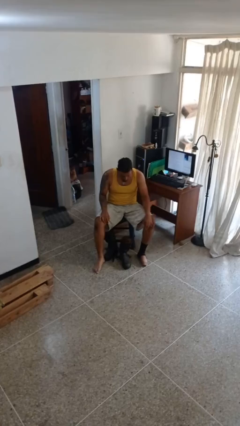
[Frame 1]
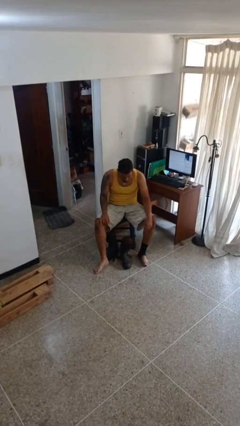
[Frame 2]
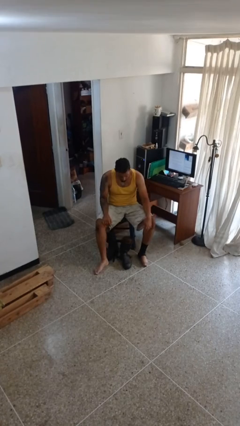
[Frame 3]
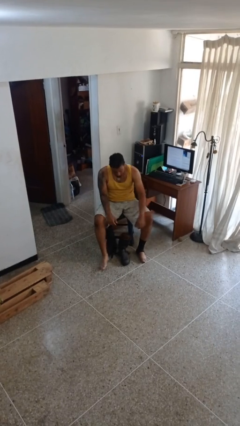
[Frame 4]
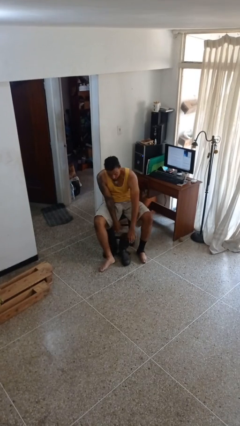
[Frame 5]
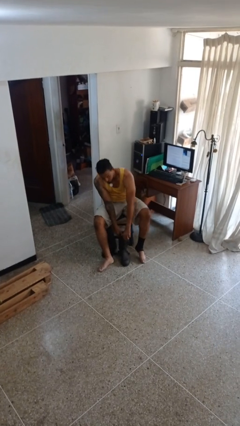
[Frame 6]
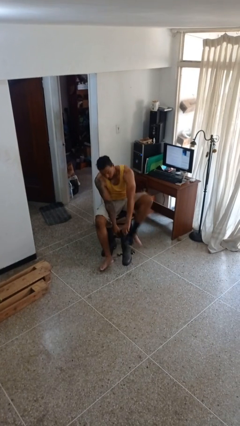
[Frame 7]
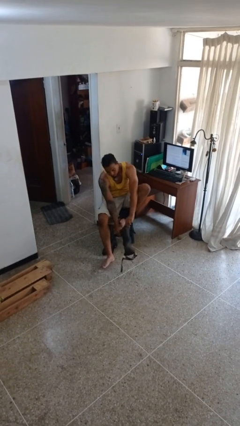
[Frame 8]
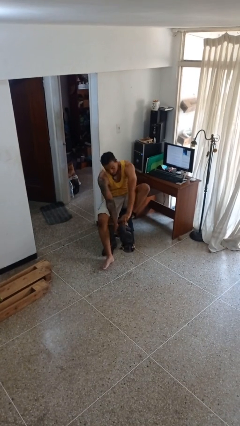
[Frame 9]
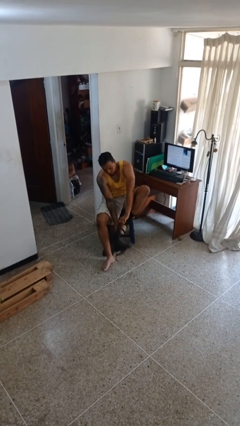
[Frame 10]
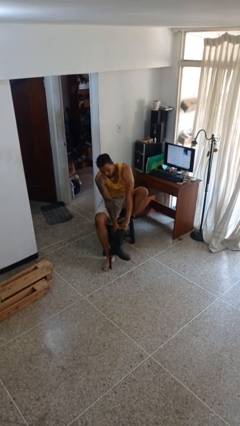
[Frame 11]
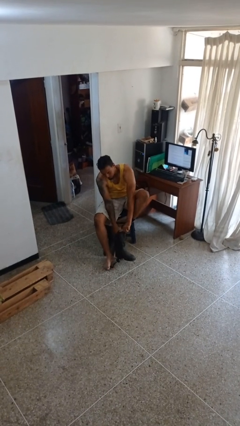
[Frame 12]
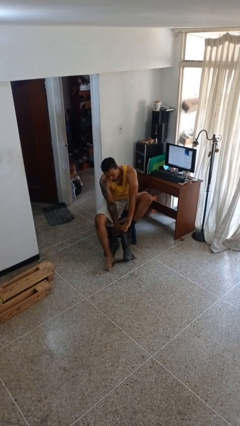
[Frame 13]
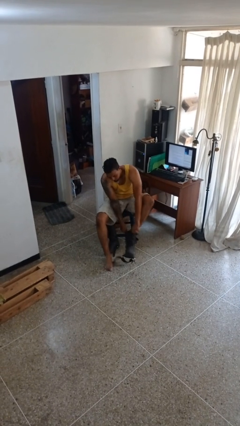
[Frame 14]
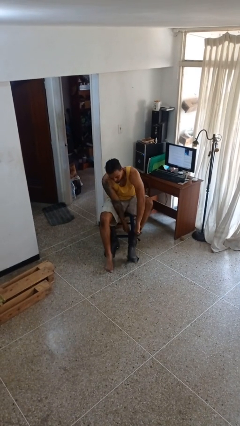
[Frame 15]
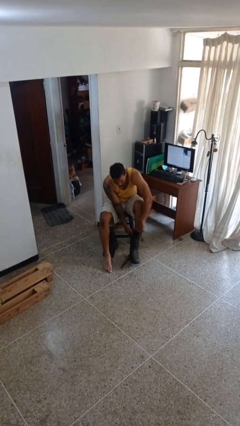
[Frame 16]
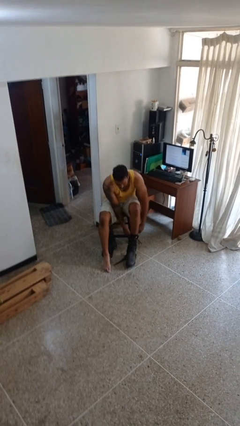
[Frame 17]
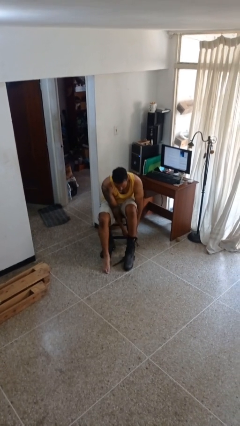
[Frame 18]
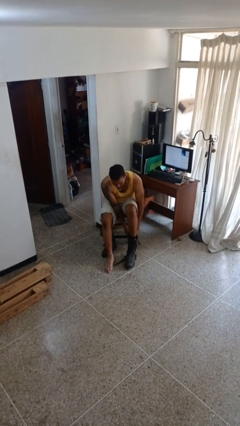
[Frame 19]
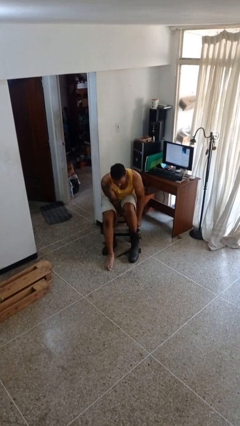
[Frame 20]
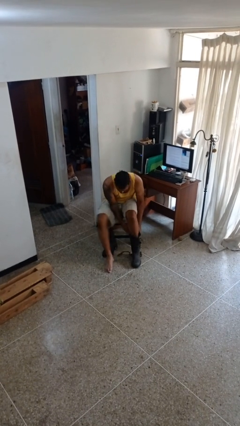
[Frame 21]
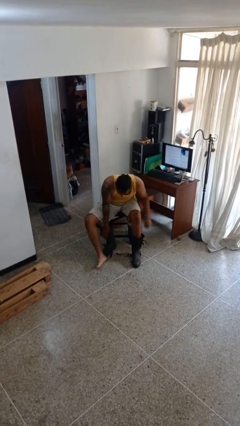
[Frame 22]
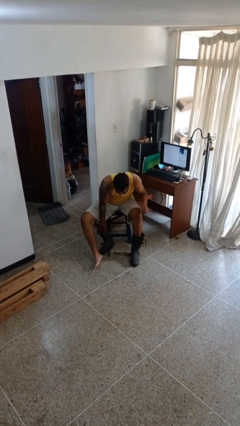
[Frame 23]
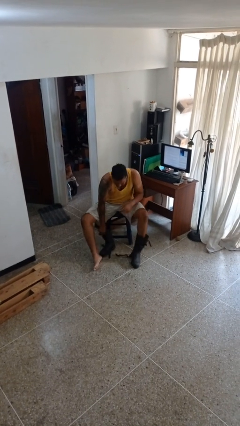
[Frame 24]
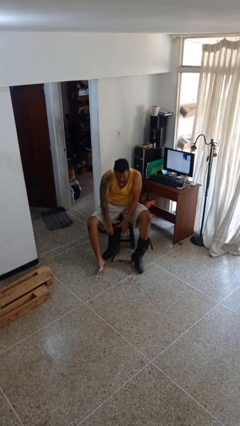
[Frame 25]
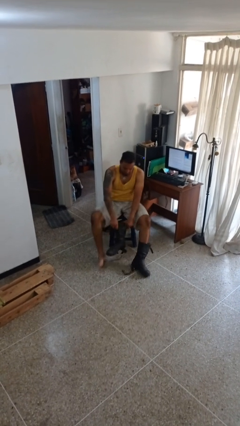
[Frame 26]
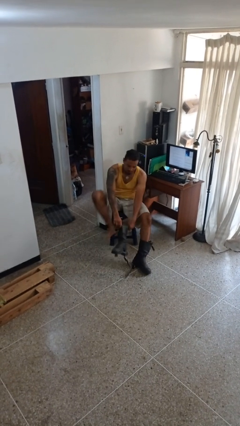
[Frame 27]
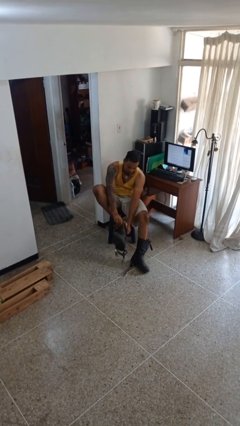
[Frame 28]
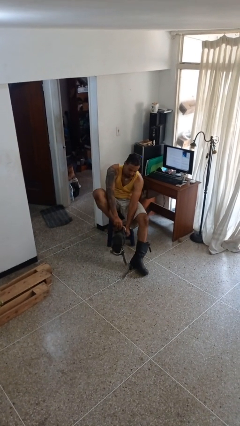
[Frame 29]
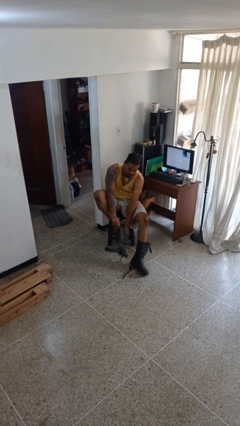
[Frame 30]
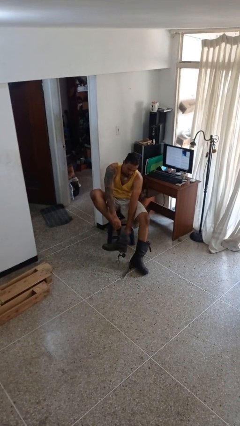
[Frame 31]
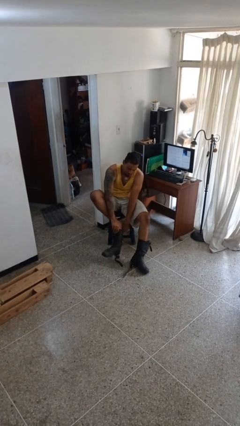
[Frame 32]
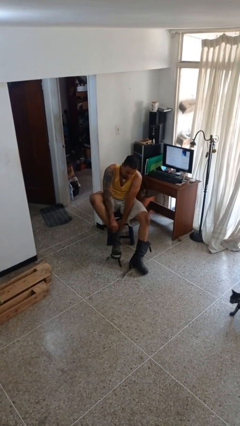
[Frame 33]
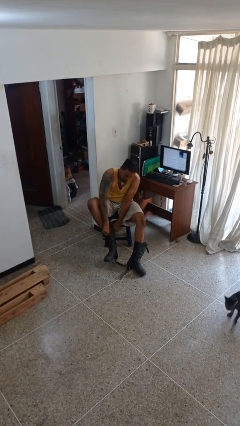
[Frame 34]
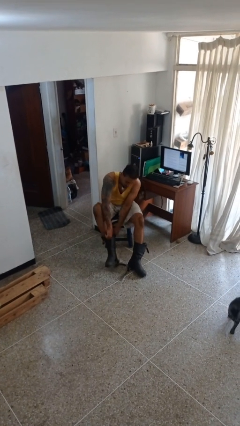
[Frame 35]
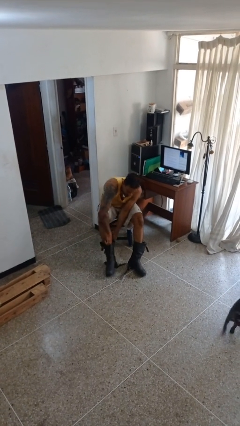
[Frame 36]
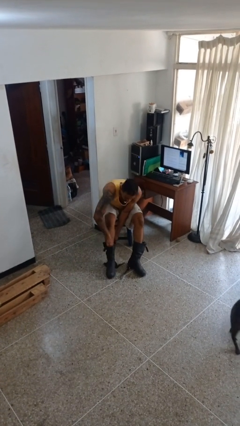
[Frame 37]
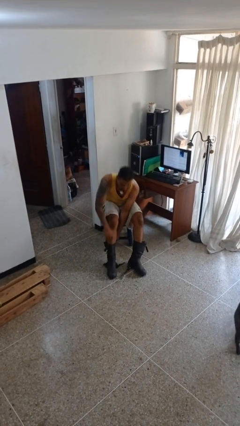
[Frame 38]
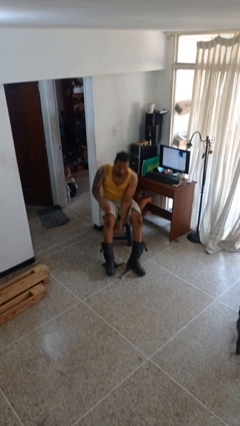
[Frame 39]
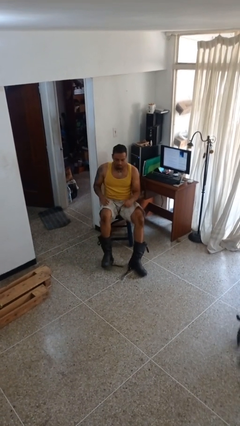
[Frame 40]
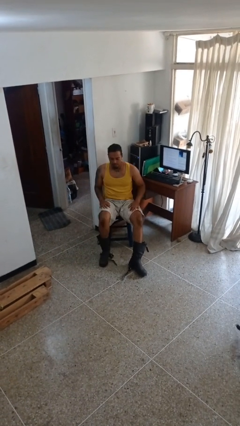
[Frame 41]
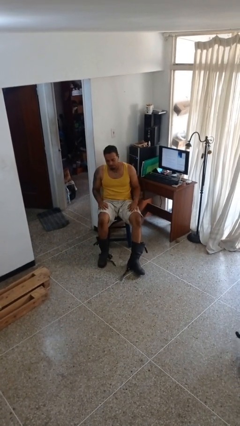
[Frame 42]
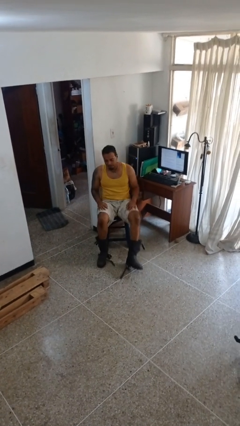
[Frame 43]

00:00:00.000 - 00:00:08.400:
person puts on boots

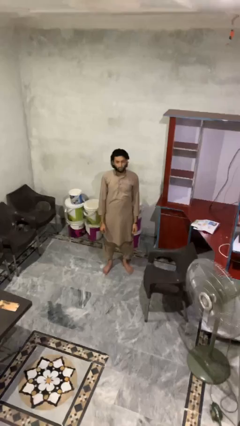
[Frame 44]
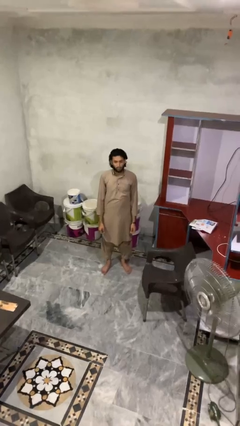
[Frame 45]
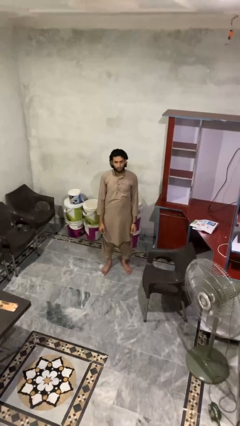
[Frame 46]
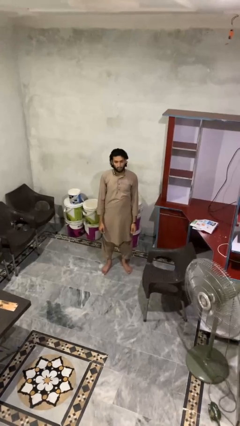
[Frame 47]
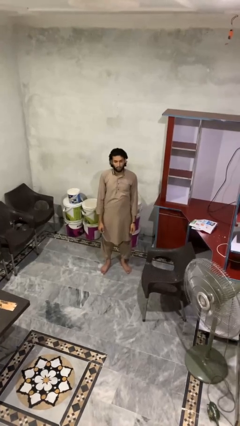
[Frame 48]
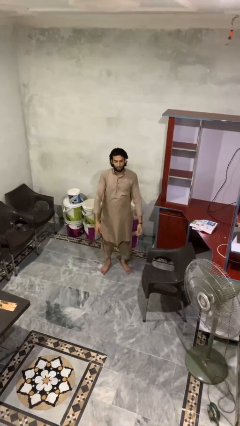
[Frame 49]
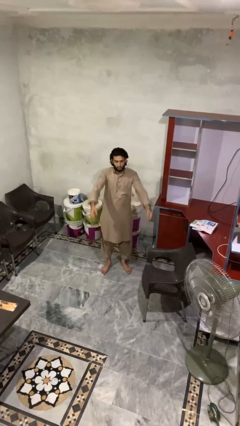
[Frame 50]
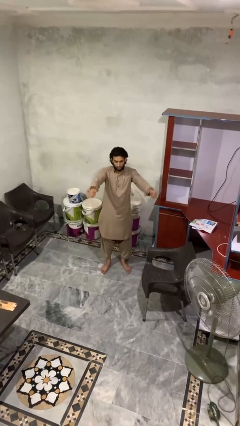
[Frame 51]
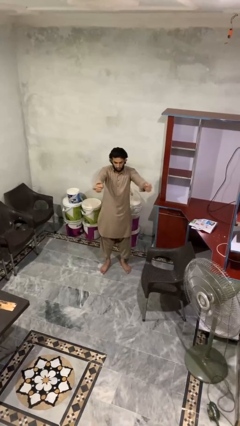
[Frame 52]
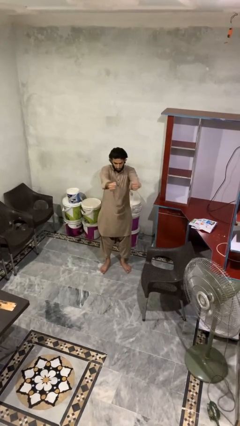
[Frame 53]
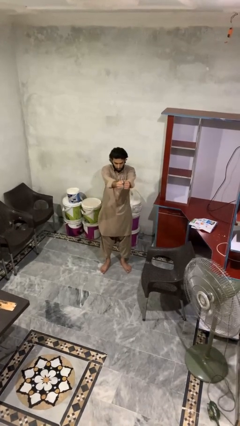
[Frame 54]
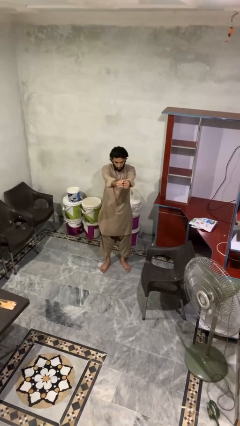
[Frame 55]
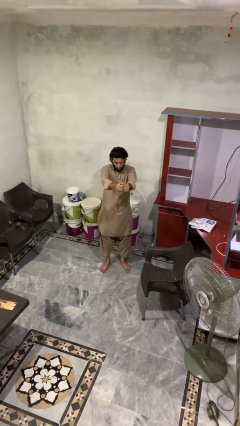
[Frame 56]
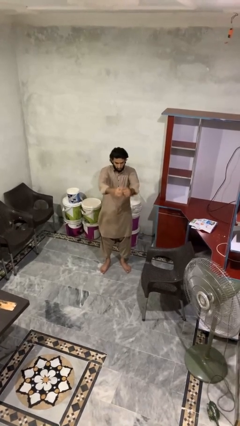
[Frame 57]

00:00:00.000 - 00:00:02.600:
person gestures zoom out

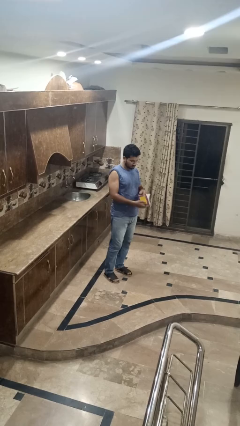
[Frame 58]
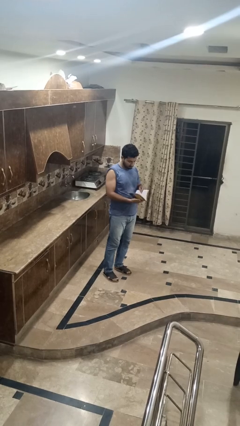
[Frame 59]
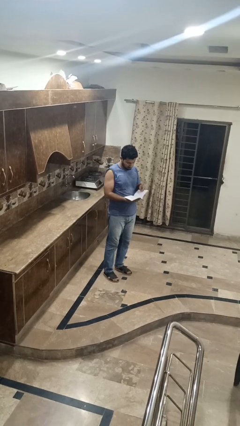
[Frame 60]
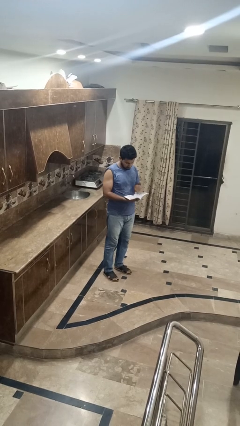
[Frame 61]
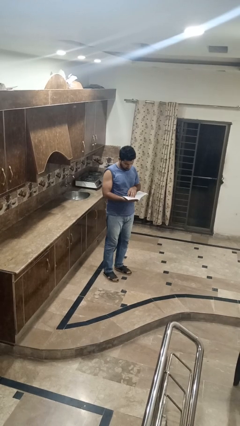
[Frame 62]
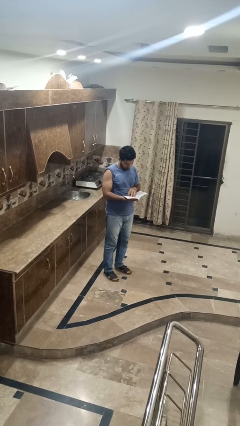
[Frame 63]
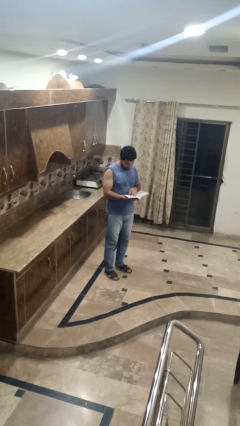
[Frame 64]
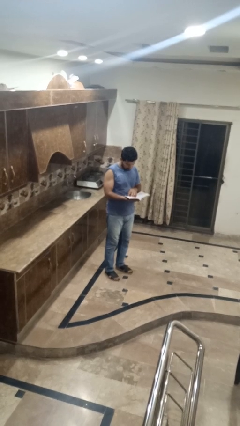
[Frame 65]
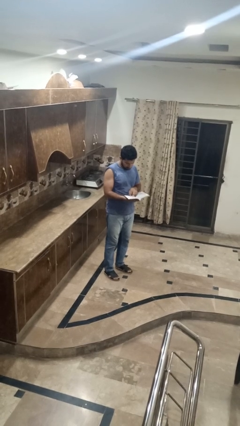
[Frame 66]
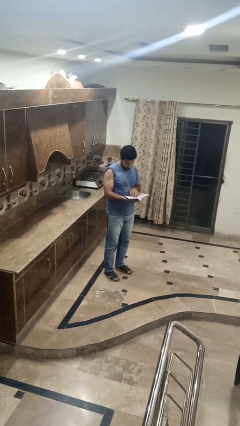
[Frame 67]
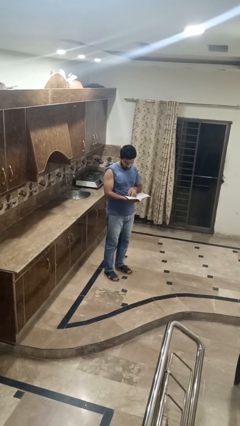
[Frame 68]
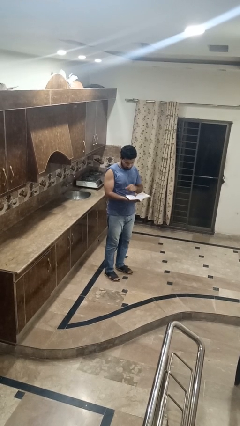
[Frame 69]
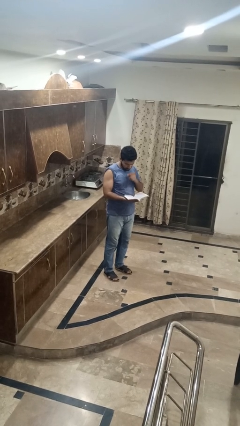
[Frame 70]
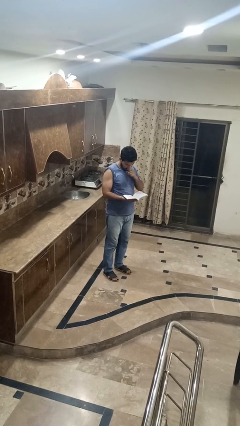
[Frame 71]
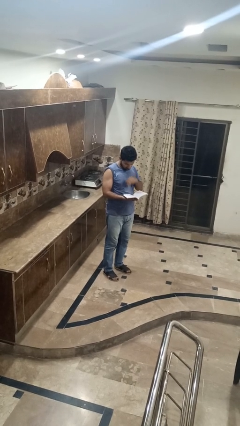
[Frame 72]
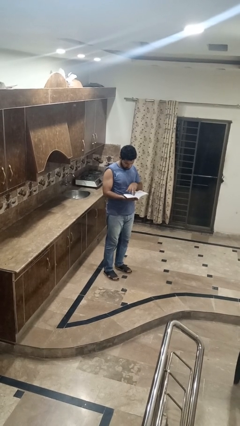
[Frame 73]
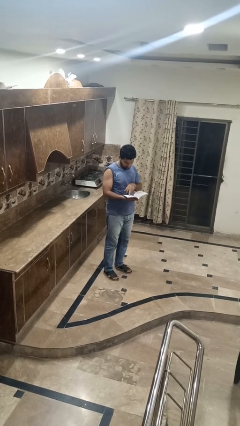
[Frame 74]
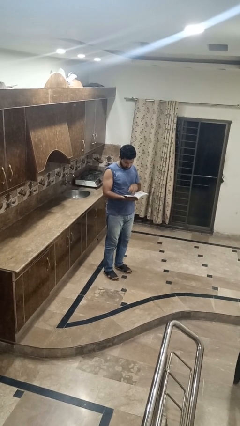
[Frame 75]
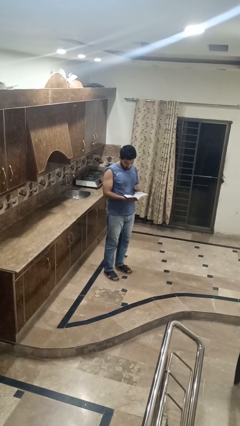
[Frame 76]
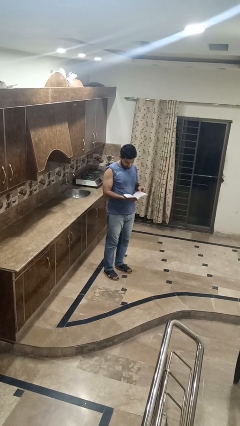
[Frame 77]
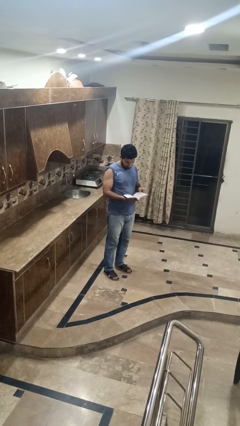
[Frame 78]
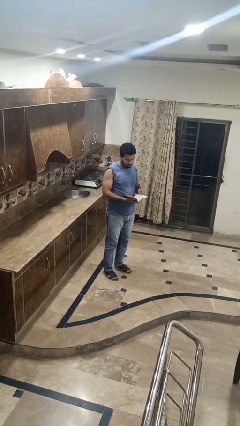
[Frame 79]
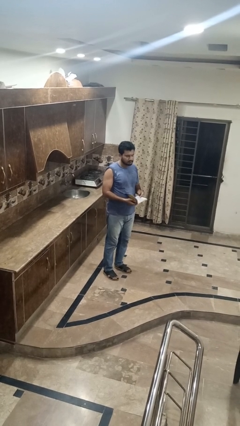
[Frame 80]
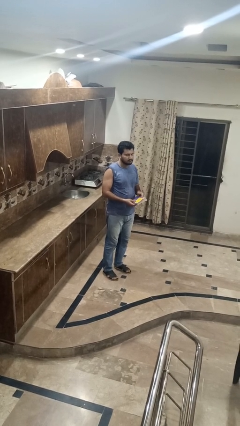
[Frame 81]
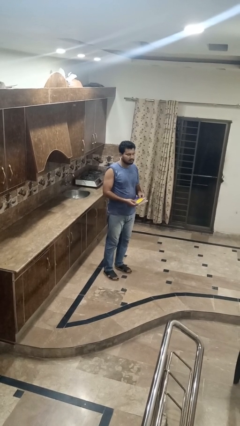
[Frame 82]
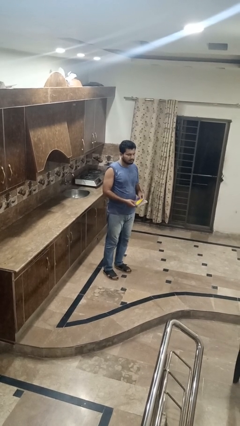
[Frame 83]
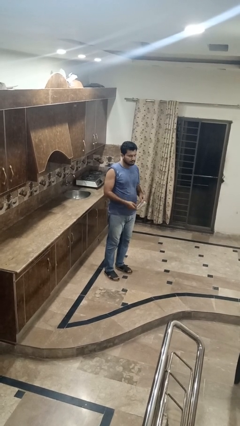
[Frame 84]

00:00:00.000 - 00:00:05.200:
person reads book

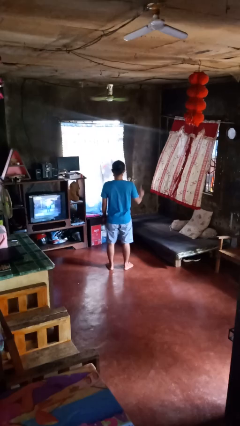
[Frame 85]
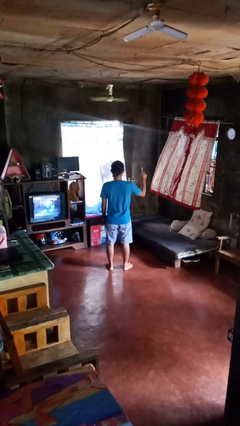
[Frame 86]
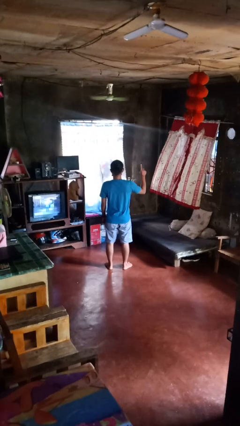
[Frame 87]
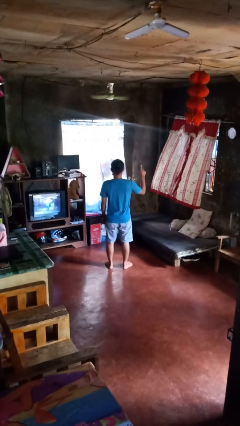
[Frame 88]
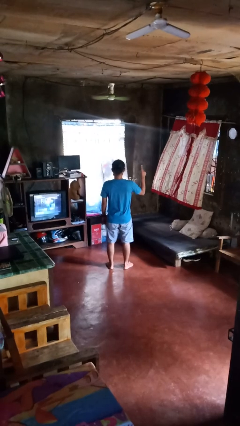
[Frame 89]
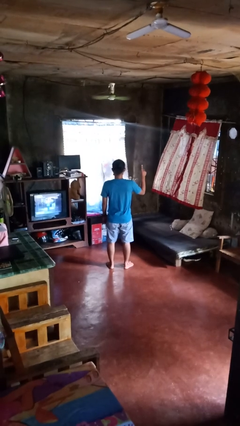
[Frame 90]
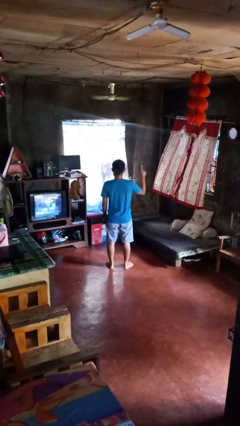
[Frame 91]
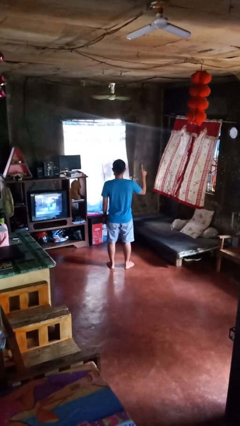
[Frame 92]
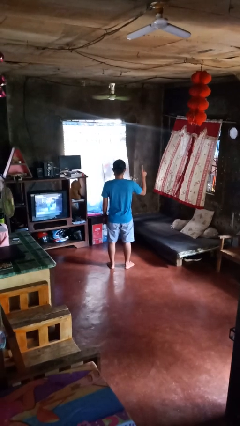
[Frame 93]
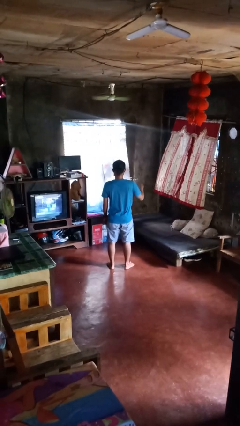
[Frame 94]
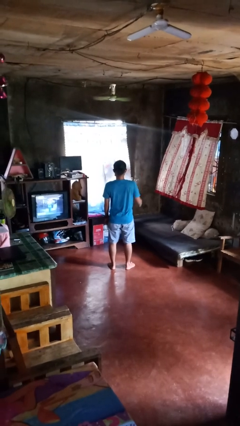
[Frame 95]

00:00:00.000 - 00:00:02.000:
person gestures number one

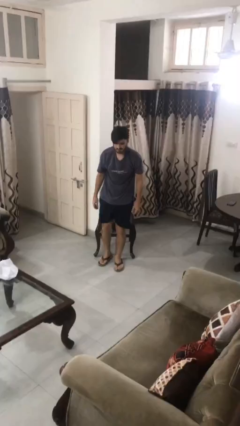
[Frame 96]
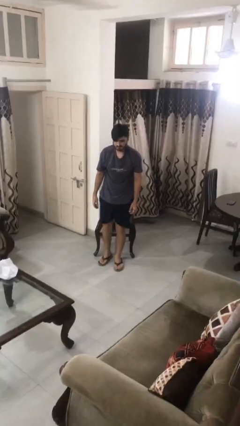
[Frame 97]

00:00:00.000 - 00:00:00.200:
person sits down
